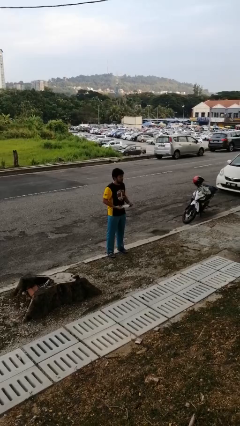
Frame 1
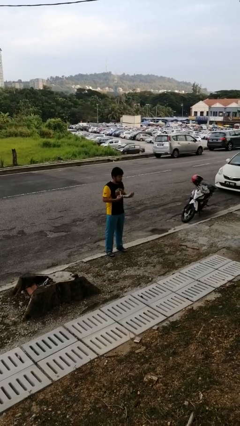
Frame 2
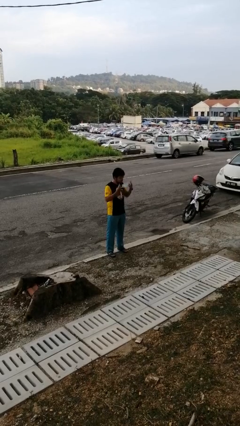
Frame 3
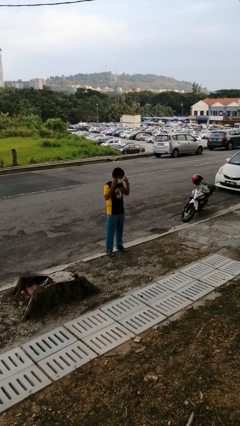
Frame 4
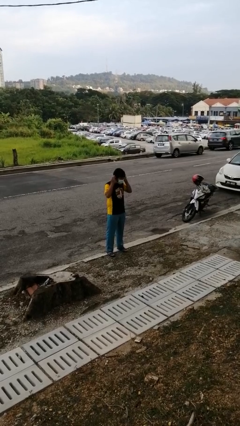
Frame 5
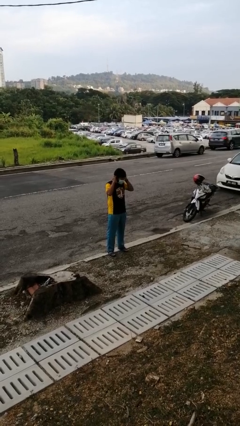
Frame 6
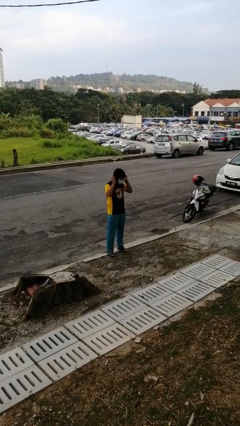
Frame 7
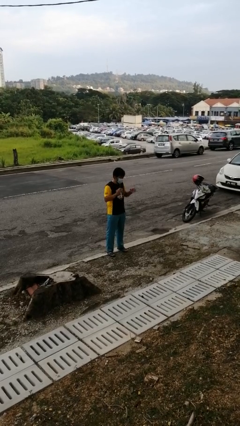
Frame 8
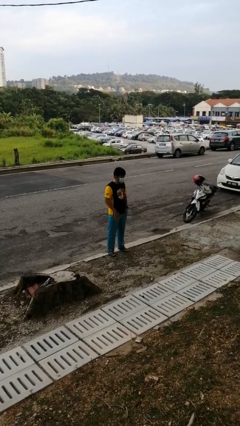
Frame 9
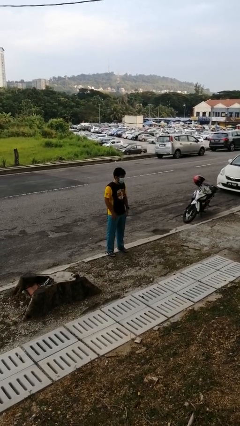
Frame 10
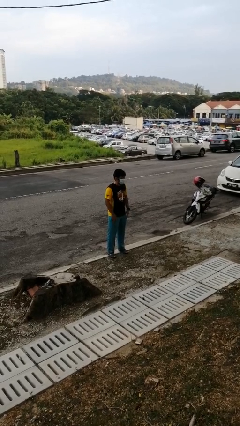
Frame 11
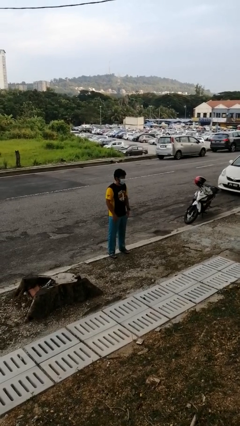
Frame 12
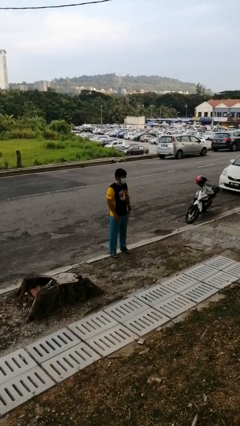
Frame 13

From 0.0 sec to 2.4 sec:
person puts on facemask

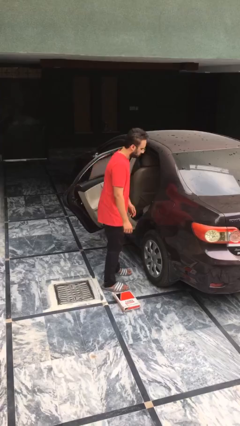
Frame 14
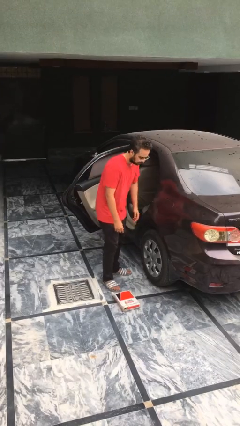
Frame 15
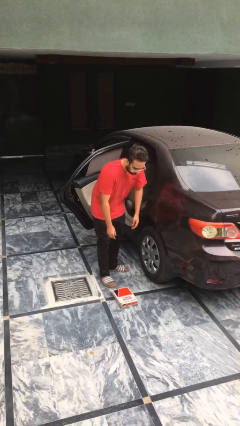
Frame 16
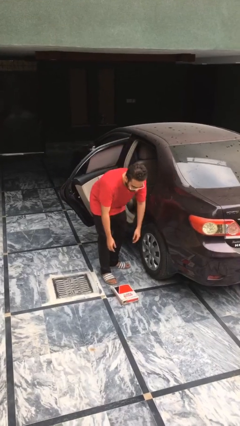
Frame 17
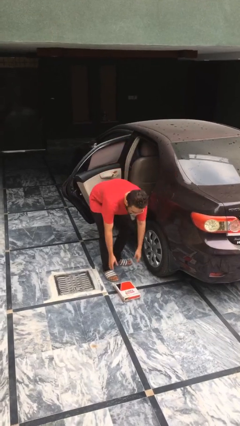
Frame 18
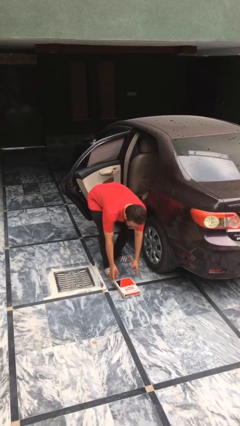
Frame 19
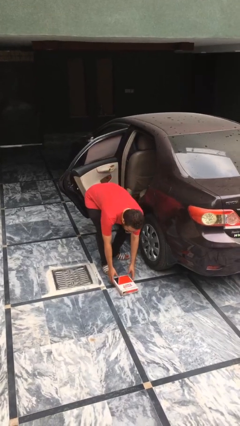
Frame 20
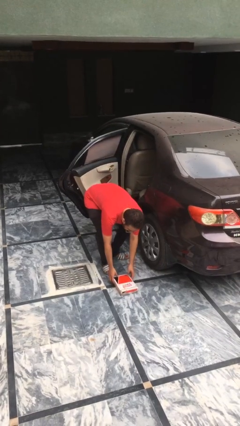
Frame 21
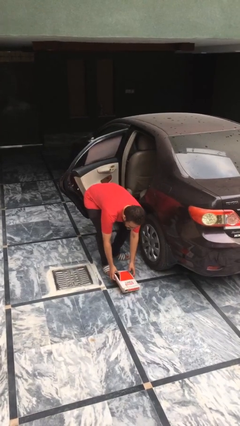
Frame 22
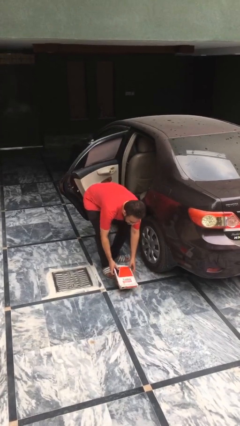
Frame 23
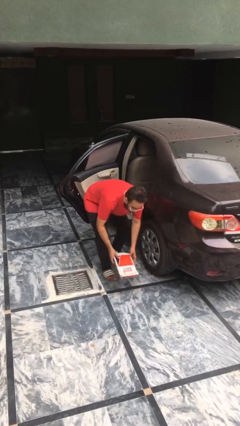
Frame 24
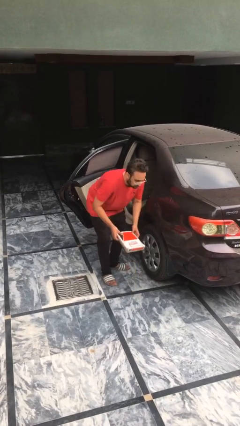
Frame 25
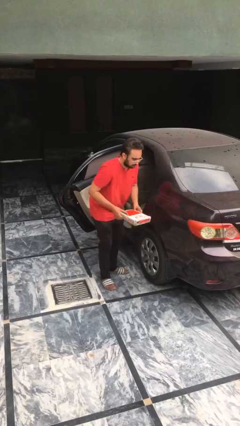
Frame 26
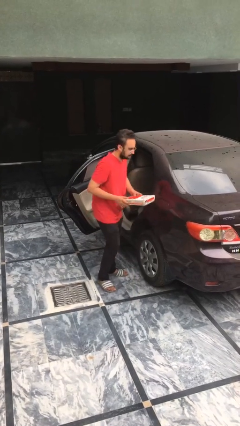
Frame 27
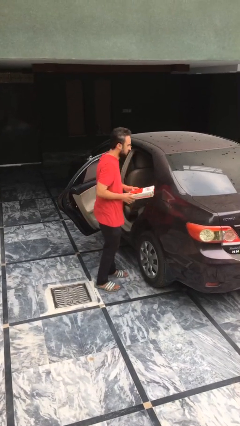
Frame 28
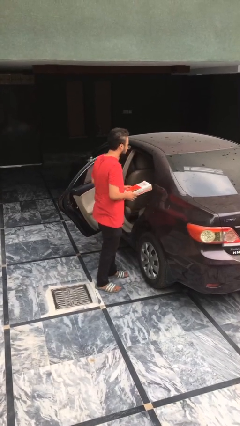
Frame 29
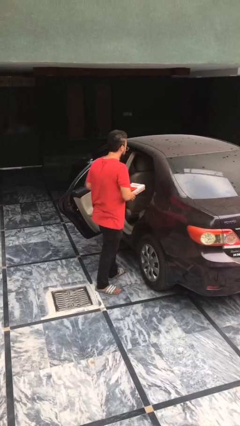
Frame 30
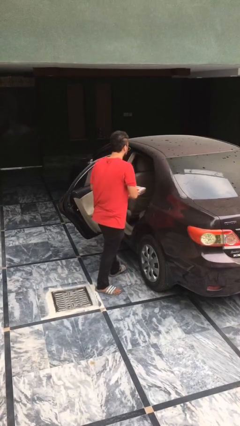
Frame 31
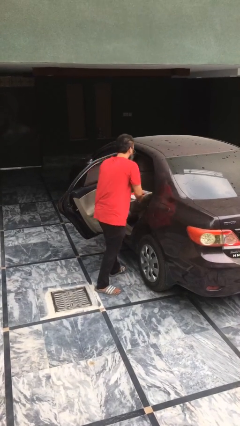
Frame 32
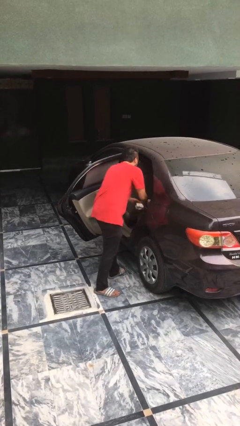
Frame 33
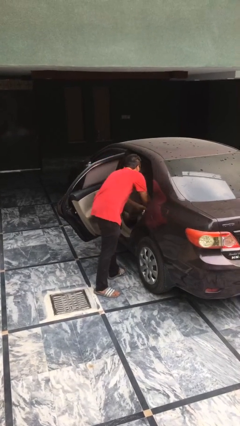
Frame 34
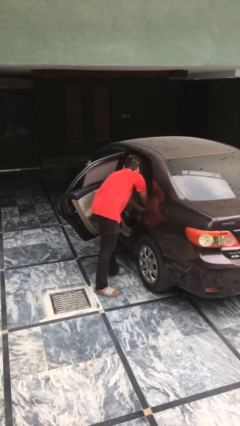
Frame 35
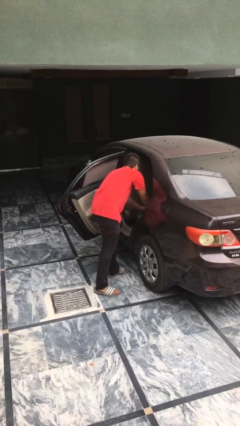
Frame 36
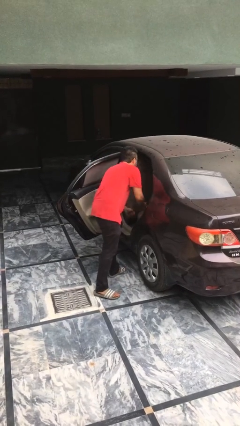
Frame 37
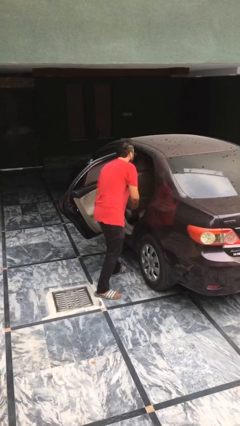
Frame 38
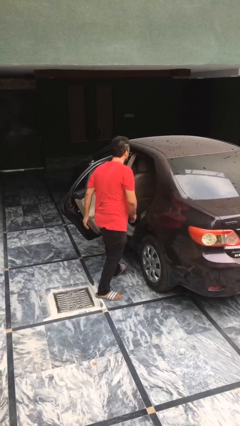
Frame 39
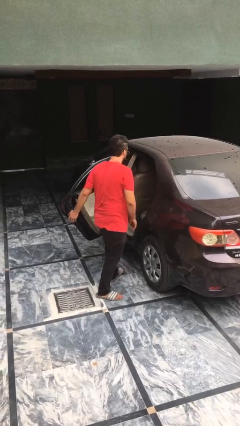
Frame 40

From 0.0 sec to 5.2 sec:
person loads car

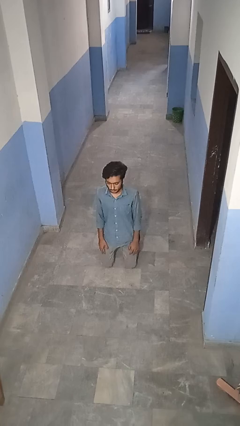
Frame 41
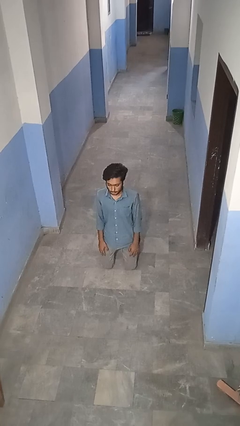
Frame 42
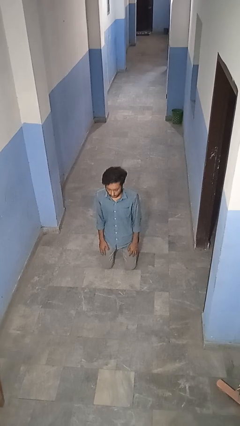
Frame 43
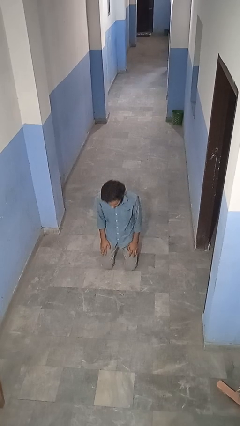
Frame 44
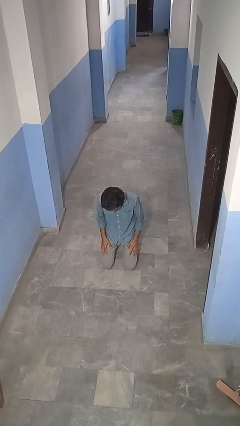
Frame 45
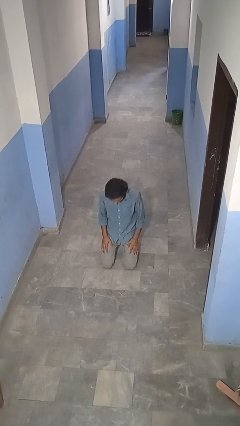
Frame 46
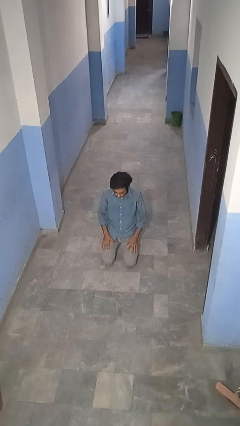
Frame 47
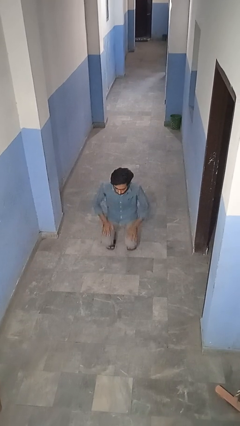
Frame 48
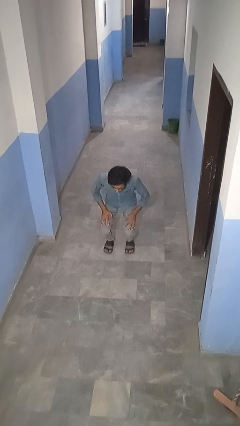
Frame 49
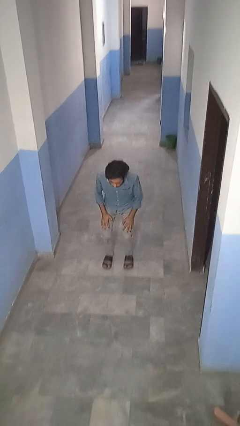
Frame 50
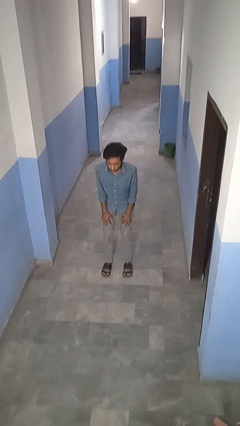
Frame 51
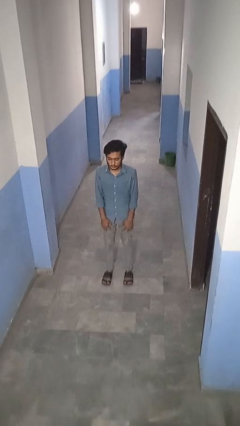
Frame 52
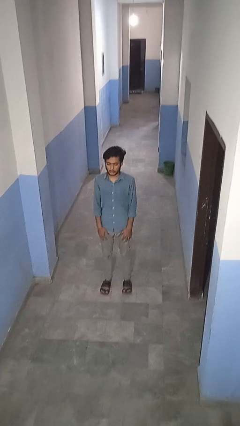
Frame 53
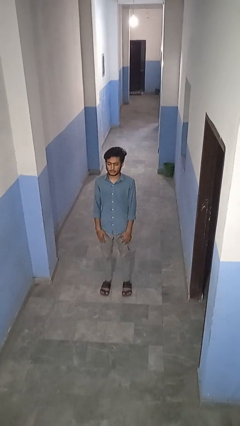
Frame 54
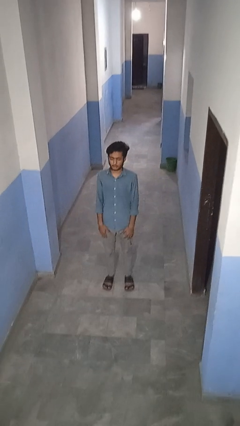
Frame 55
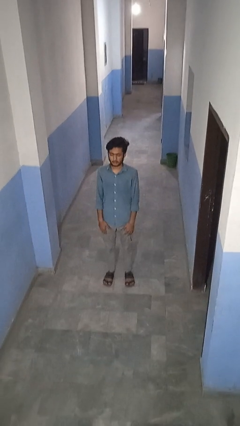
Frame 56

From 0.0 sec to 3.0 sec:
person stands up from floor

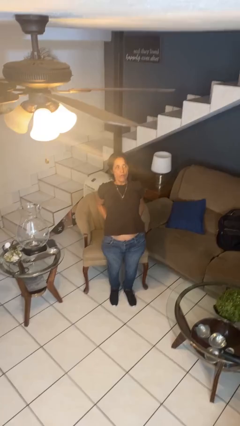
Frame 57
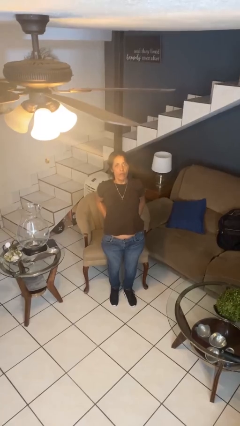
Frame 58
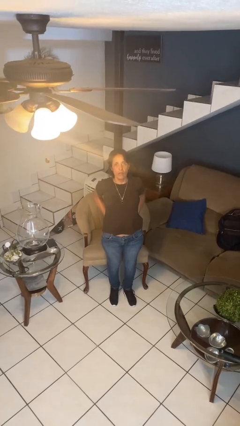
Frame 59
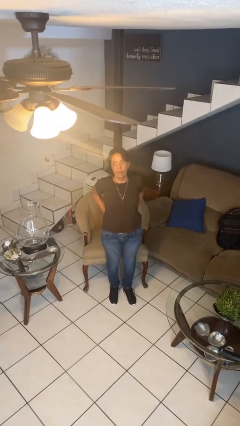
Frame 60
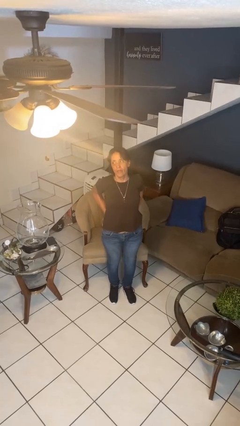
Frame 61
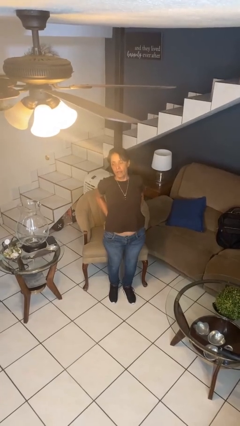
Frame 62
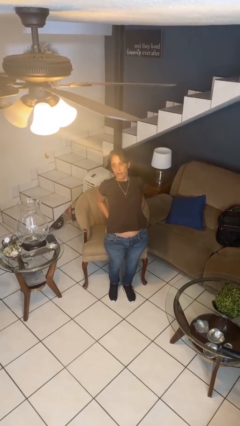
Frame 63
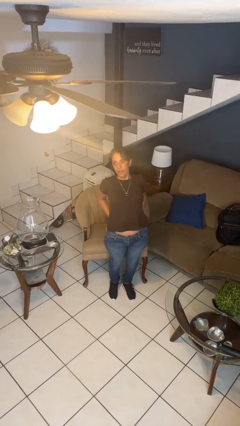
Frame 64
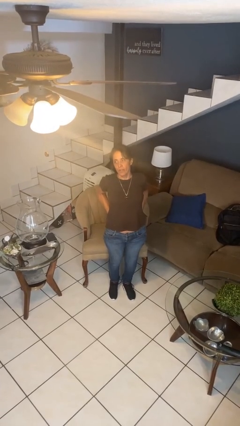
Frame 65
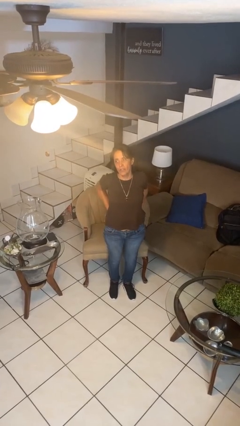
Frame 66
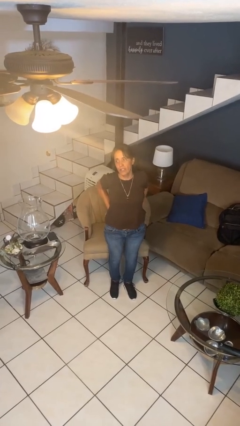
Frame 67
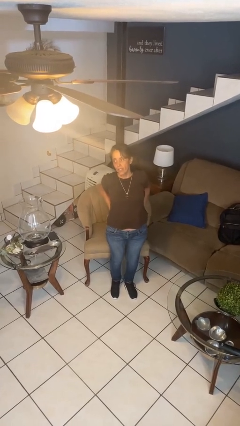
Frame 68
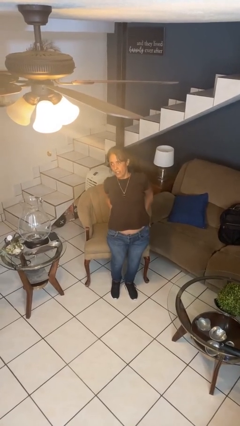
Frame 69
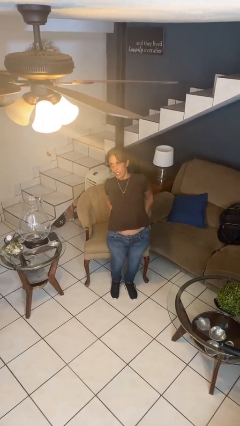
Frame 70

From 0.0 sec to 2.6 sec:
person stretches back

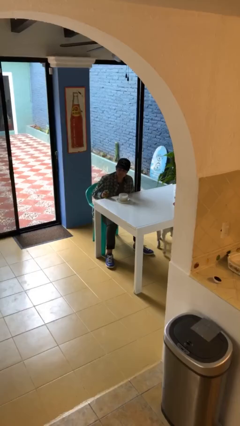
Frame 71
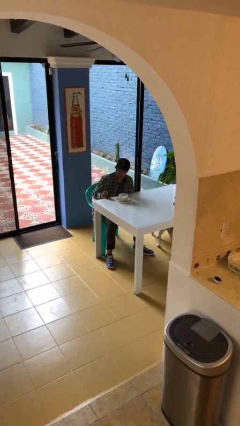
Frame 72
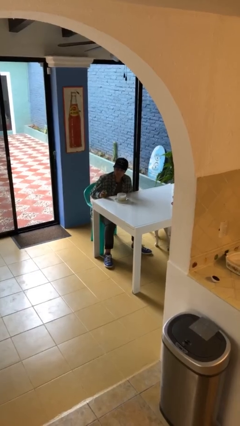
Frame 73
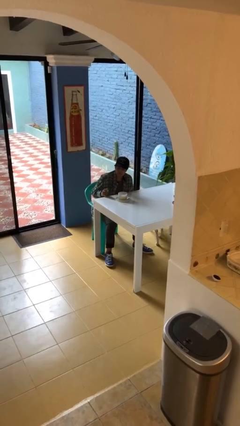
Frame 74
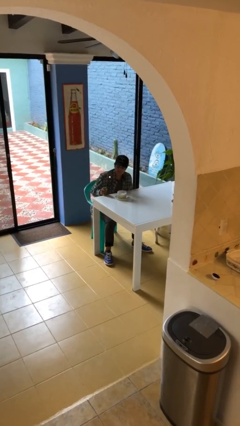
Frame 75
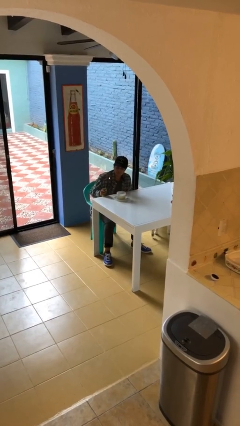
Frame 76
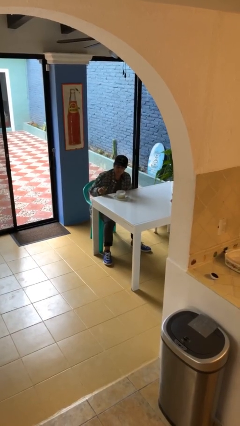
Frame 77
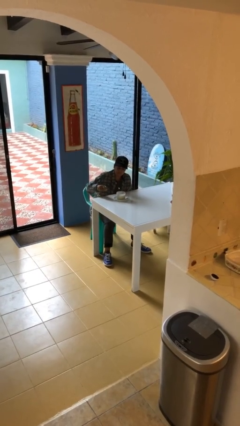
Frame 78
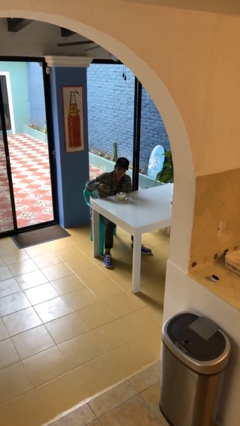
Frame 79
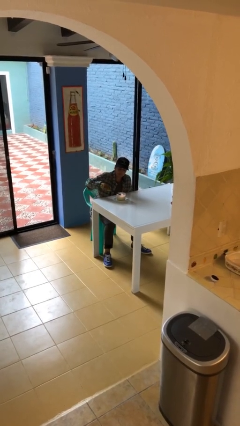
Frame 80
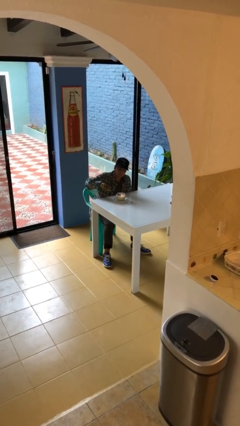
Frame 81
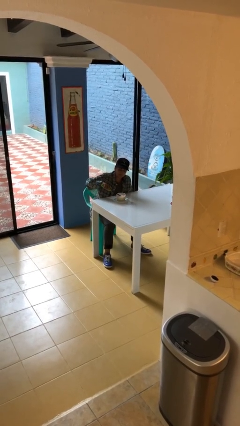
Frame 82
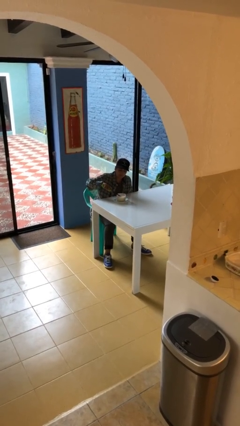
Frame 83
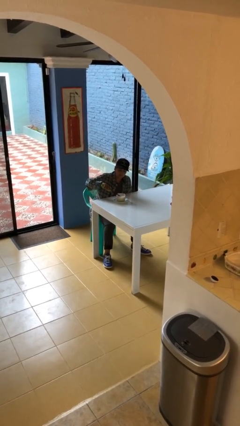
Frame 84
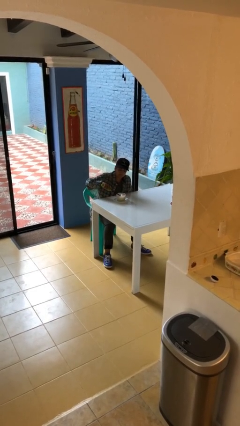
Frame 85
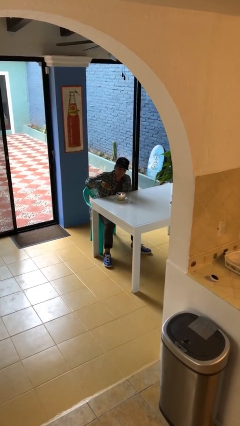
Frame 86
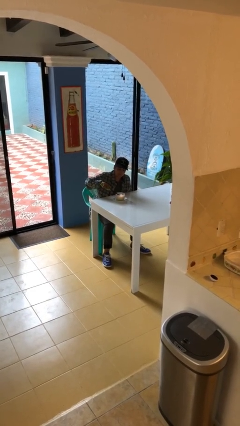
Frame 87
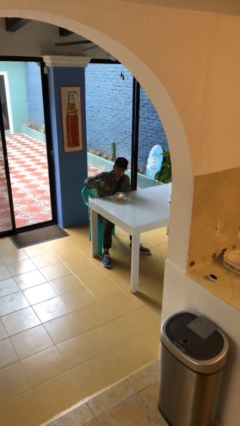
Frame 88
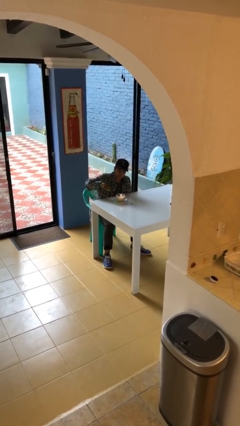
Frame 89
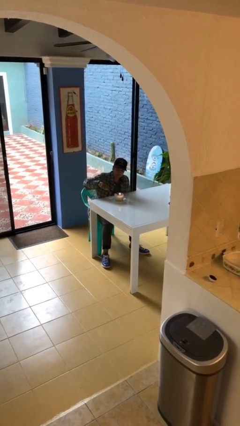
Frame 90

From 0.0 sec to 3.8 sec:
person lights candle

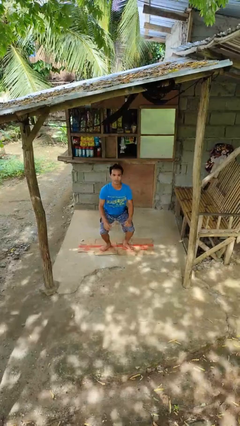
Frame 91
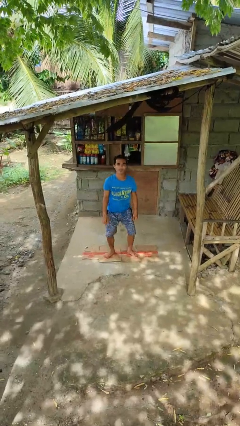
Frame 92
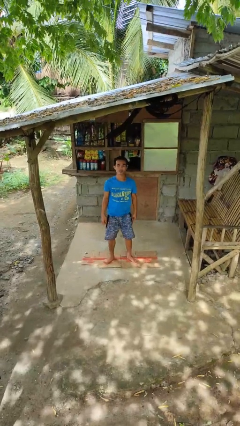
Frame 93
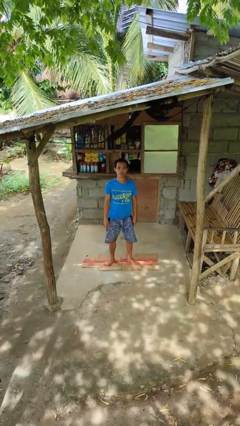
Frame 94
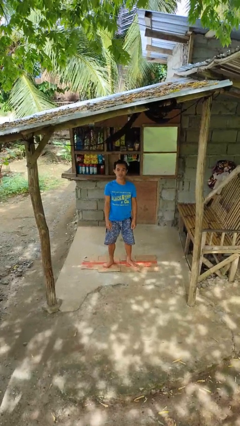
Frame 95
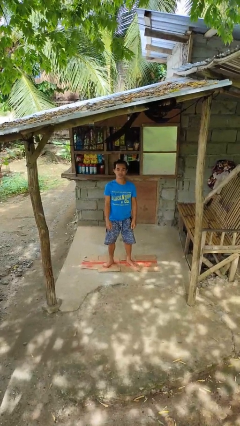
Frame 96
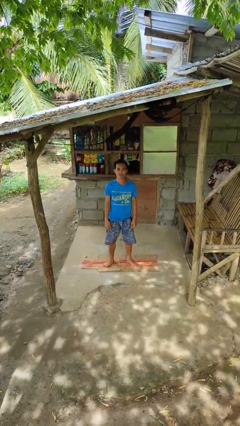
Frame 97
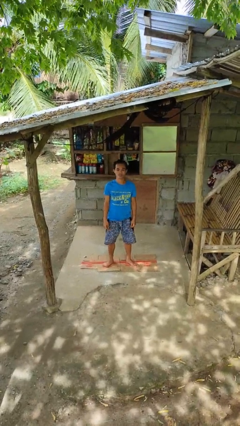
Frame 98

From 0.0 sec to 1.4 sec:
person stands up
